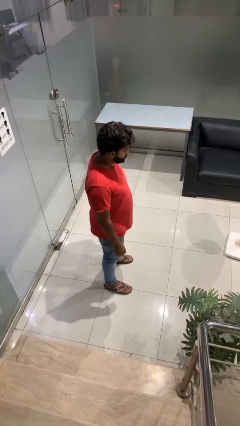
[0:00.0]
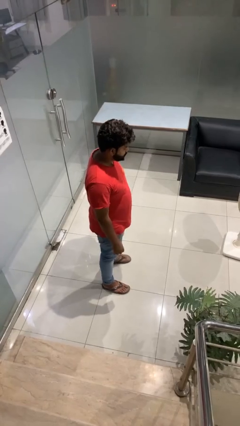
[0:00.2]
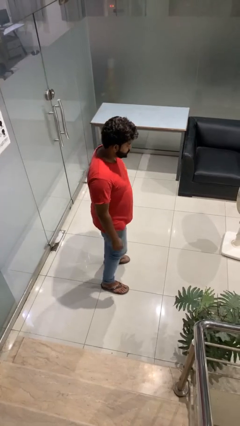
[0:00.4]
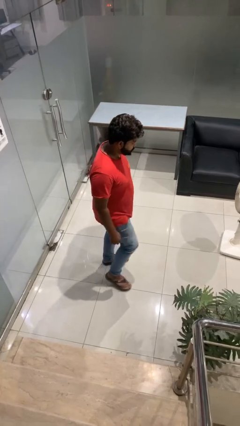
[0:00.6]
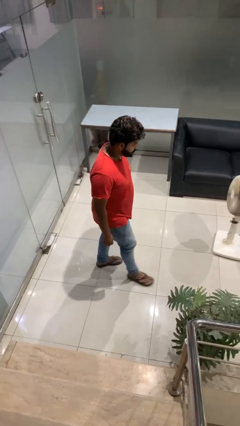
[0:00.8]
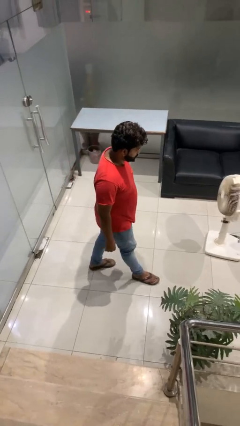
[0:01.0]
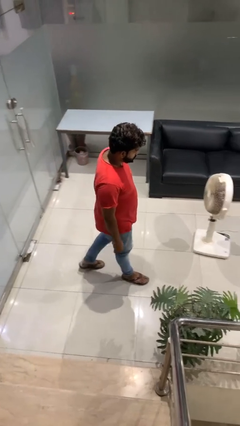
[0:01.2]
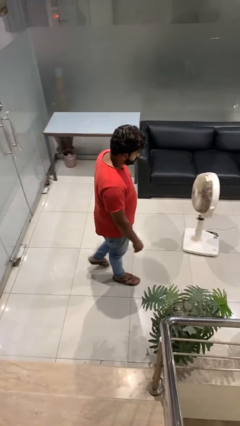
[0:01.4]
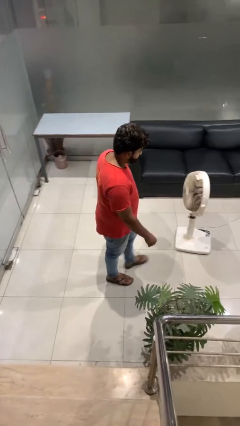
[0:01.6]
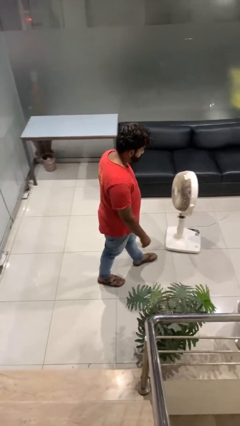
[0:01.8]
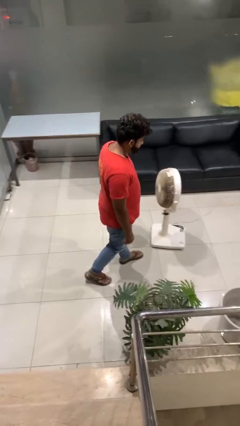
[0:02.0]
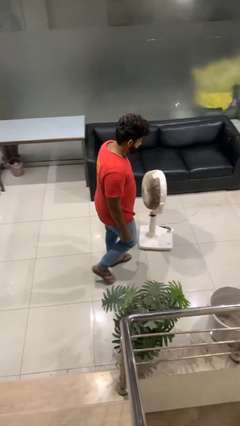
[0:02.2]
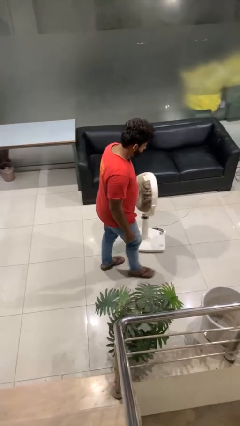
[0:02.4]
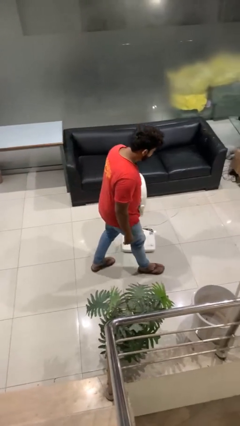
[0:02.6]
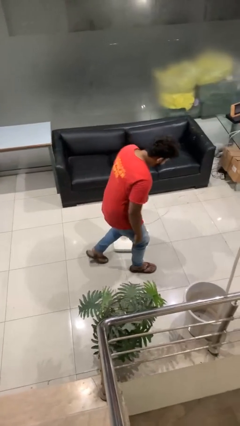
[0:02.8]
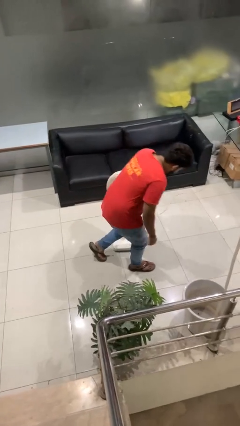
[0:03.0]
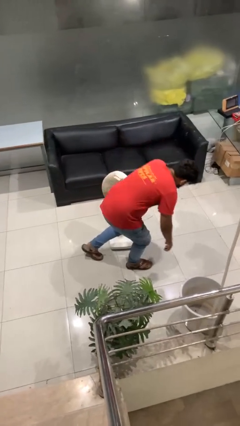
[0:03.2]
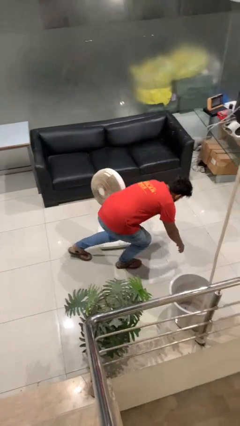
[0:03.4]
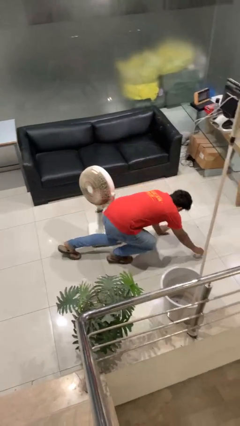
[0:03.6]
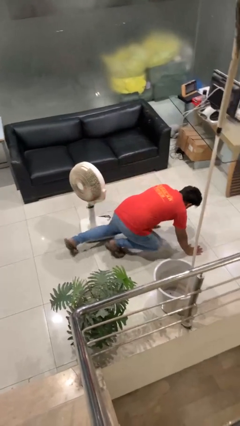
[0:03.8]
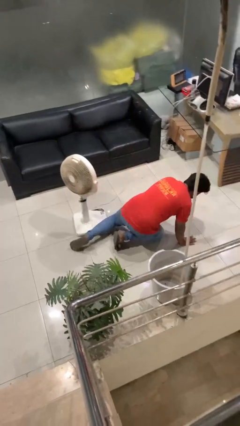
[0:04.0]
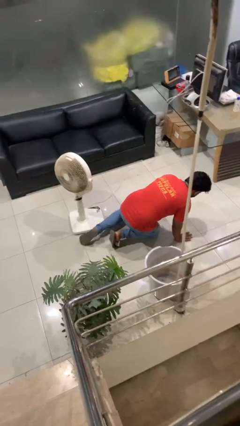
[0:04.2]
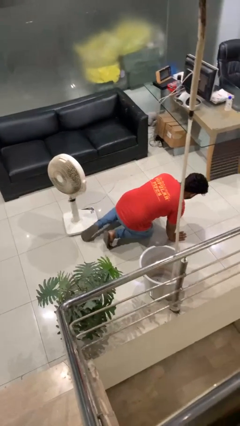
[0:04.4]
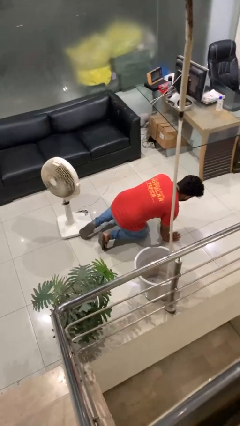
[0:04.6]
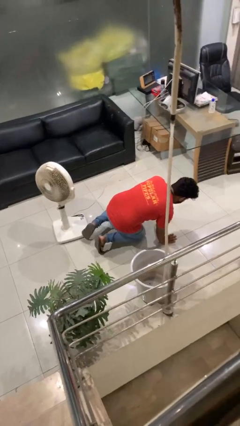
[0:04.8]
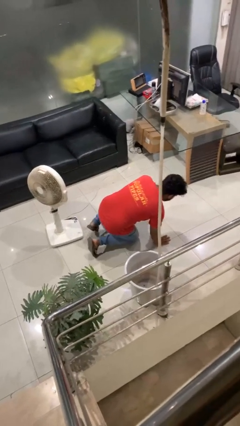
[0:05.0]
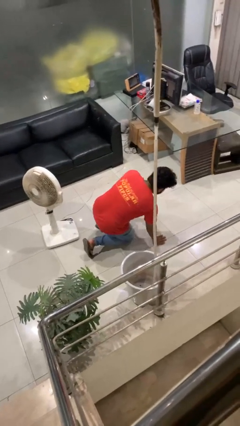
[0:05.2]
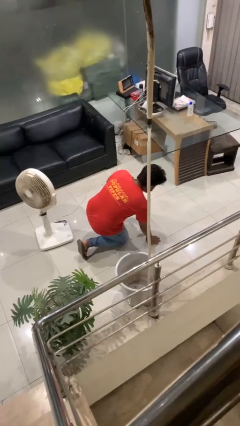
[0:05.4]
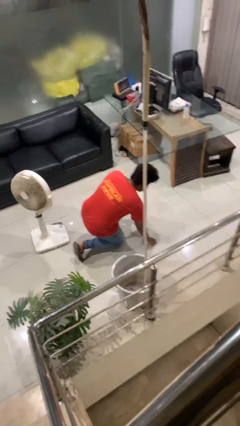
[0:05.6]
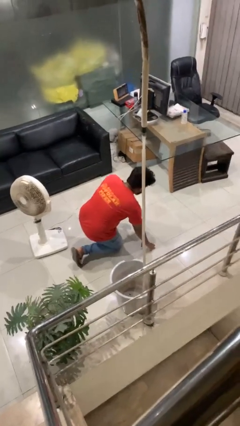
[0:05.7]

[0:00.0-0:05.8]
person trips on object on floor

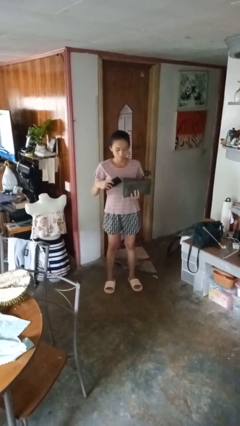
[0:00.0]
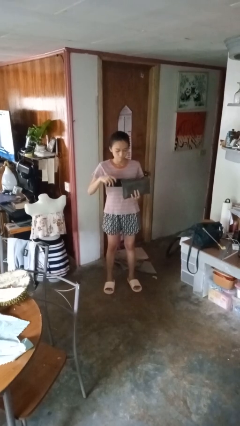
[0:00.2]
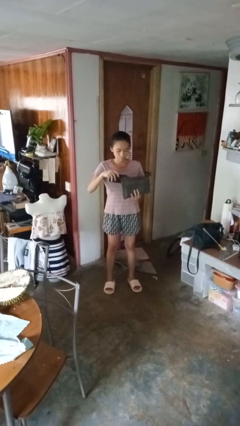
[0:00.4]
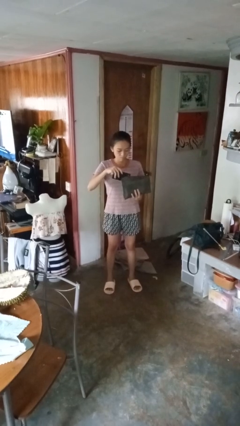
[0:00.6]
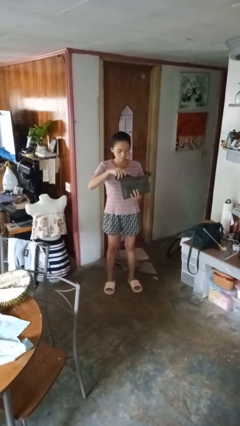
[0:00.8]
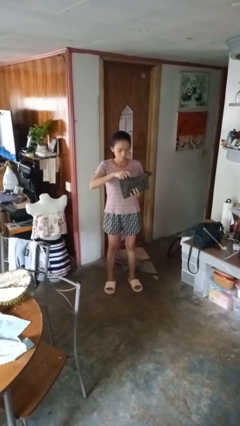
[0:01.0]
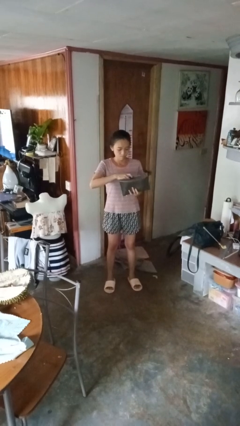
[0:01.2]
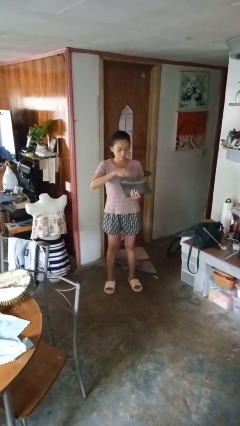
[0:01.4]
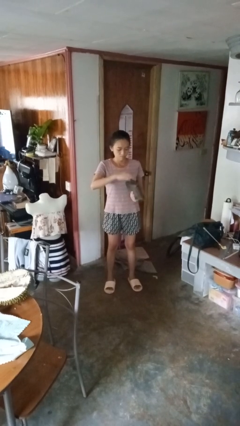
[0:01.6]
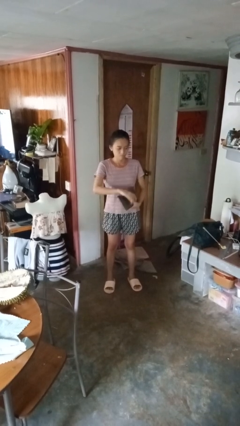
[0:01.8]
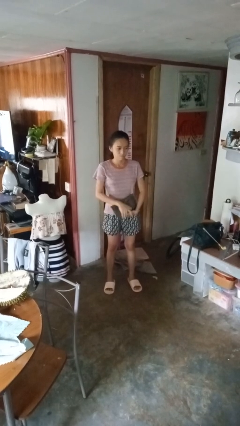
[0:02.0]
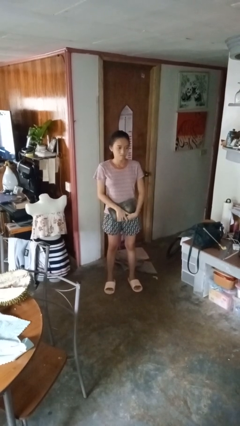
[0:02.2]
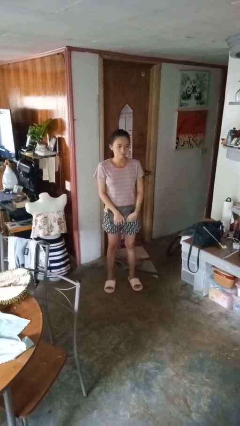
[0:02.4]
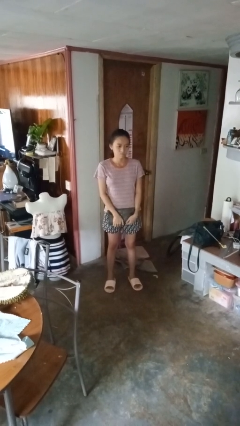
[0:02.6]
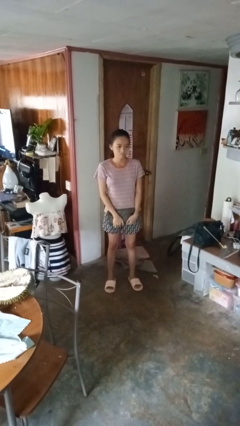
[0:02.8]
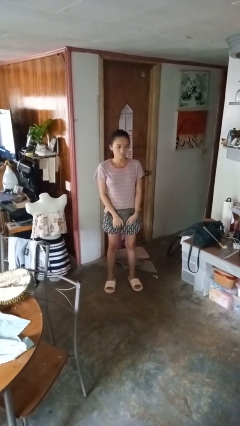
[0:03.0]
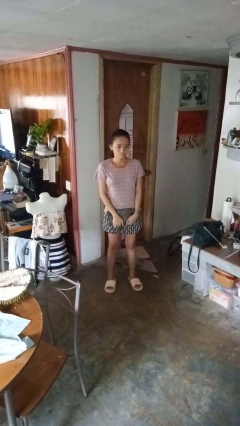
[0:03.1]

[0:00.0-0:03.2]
person puts object into purse

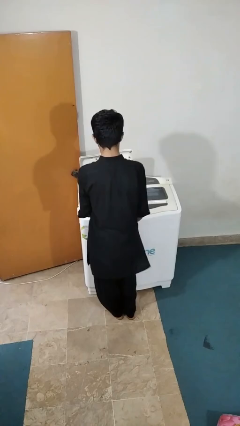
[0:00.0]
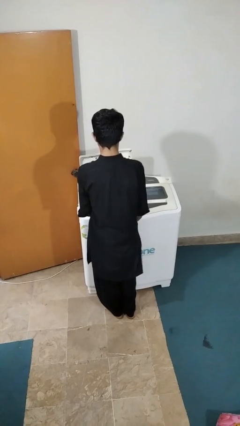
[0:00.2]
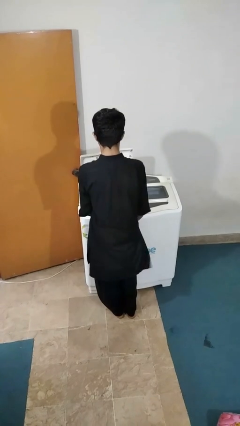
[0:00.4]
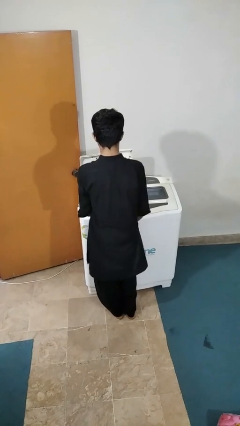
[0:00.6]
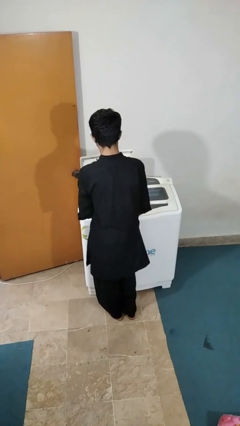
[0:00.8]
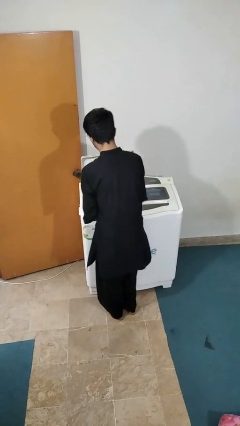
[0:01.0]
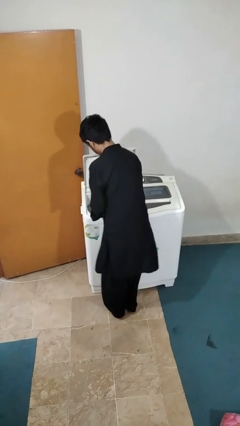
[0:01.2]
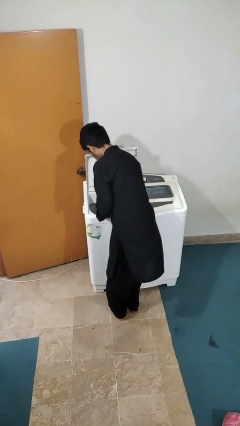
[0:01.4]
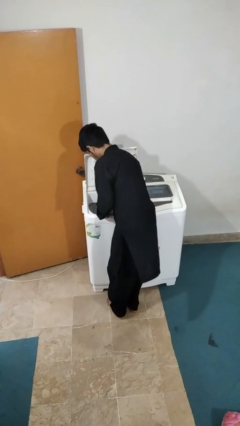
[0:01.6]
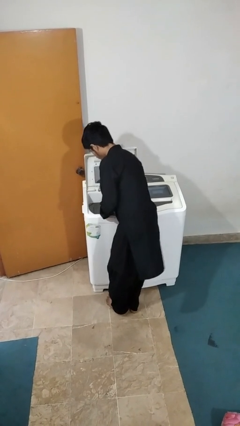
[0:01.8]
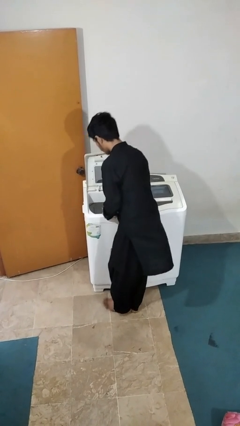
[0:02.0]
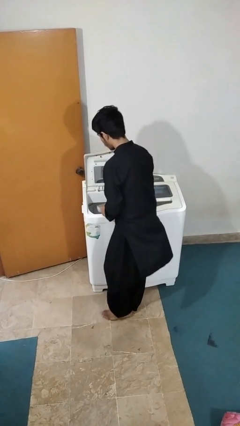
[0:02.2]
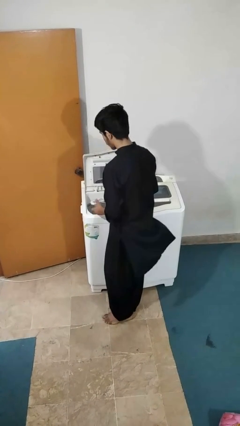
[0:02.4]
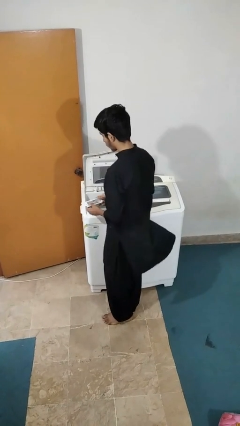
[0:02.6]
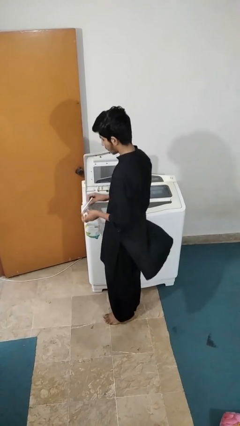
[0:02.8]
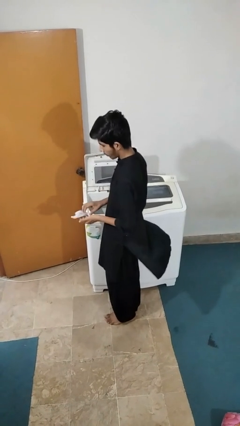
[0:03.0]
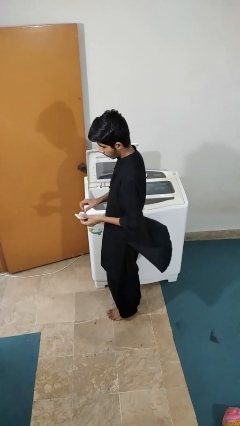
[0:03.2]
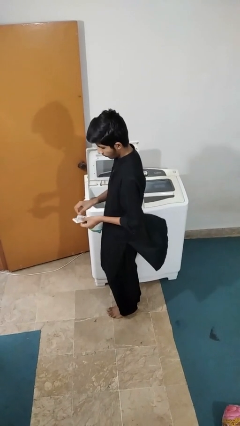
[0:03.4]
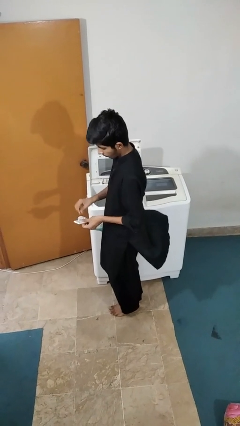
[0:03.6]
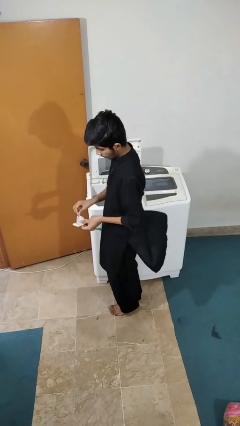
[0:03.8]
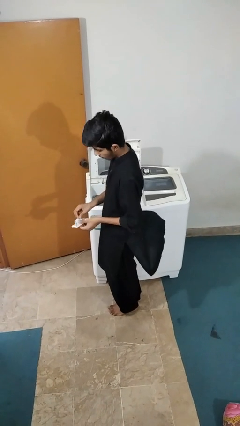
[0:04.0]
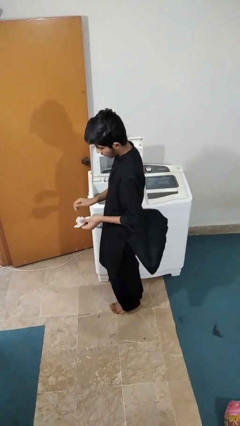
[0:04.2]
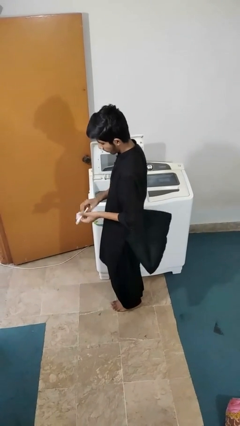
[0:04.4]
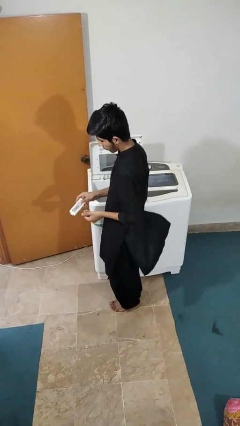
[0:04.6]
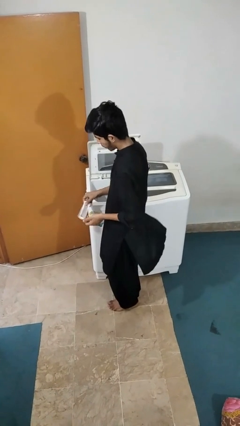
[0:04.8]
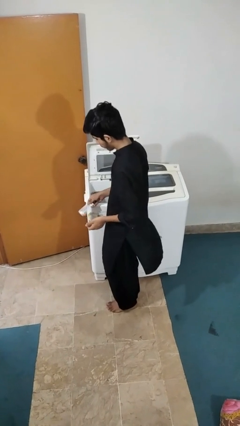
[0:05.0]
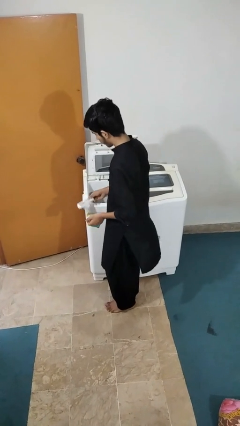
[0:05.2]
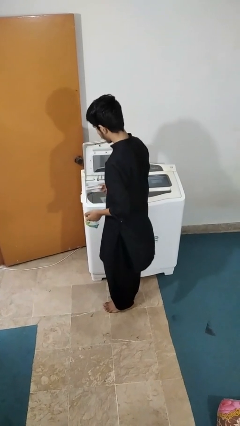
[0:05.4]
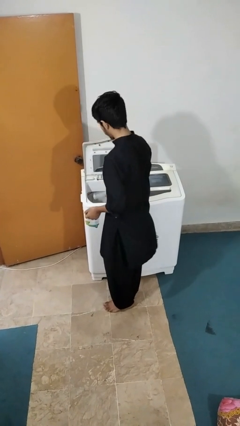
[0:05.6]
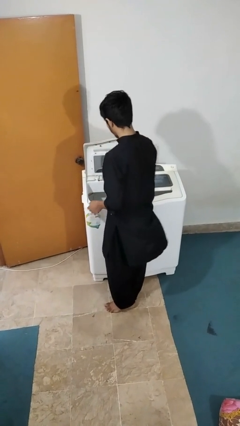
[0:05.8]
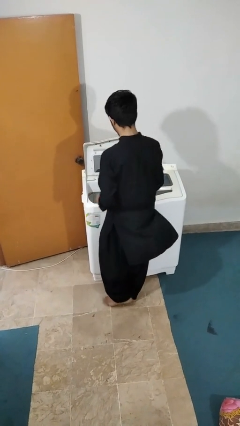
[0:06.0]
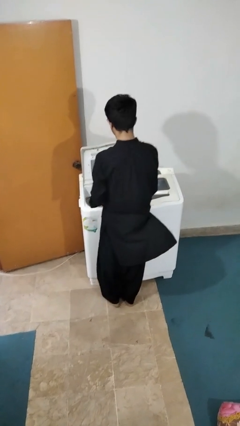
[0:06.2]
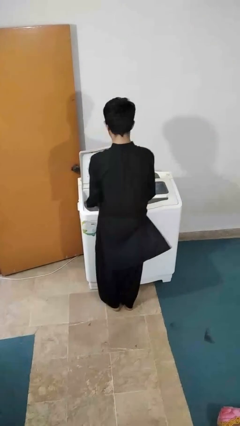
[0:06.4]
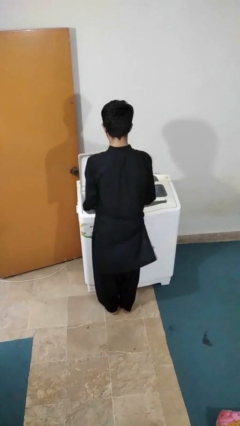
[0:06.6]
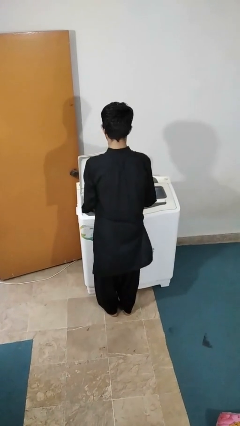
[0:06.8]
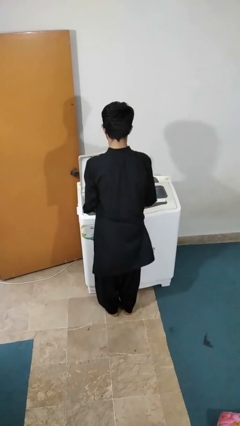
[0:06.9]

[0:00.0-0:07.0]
person cleans dryer lint trap

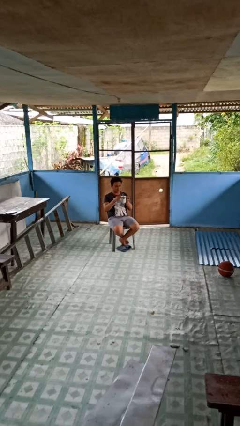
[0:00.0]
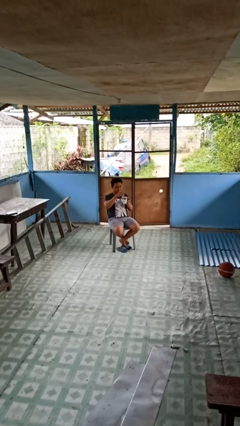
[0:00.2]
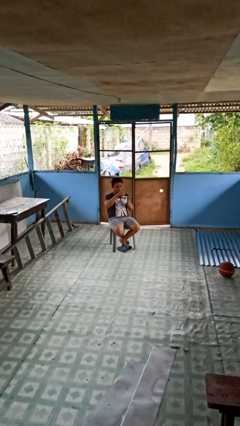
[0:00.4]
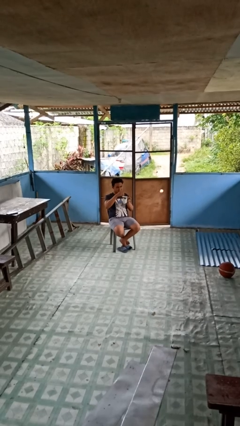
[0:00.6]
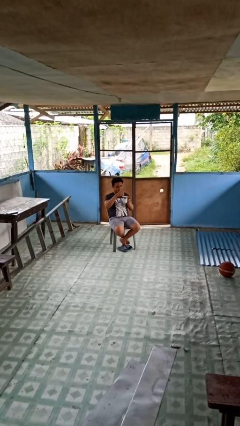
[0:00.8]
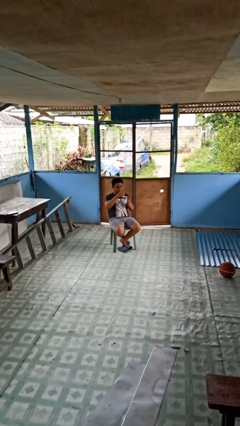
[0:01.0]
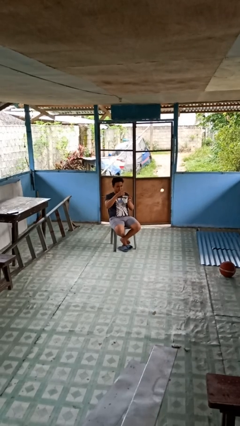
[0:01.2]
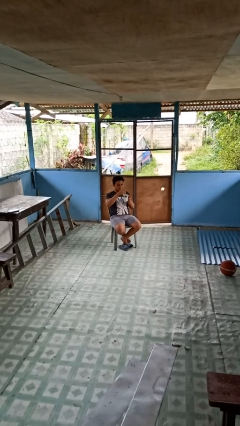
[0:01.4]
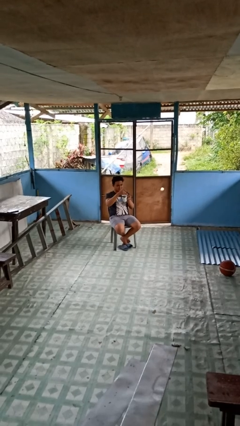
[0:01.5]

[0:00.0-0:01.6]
person stirs mug

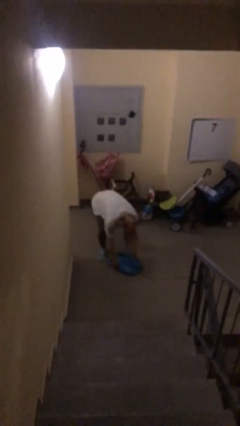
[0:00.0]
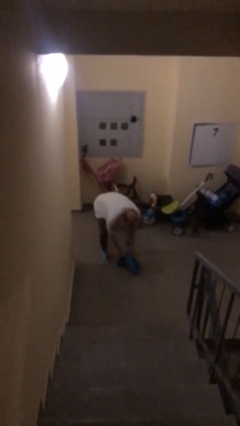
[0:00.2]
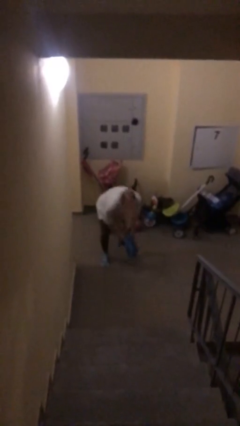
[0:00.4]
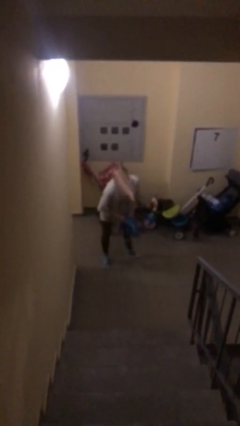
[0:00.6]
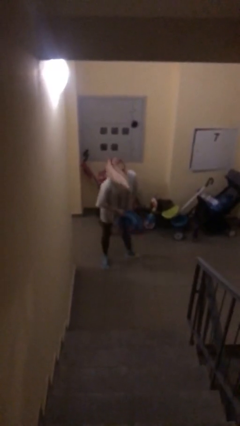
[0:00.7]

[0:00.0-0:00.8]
person picks up object from floor
